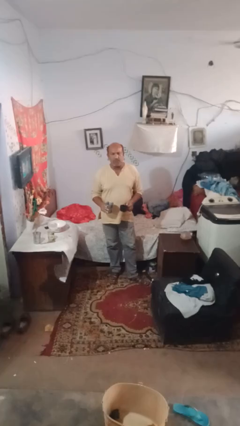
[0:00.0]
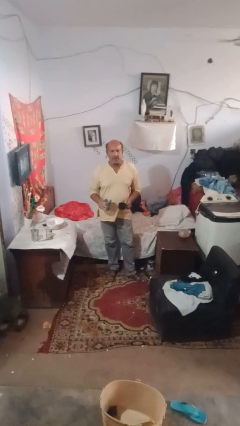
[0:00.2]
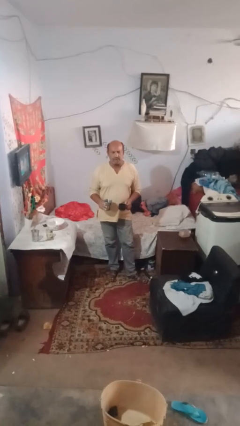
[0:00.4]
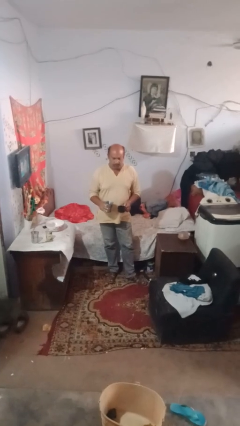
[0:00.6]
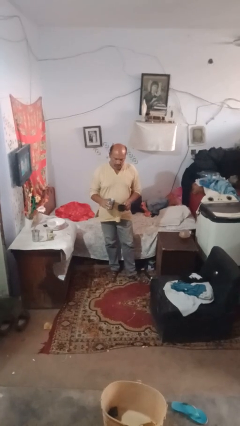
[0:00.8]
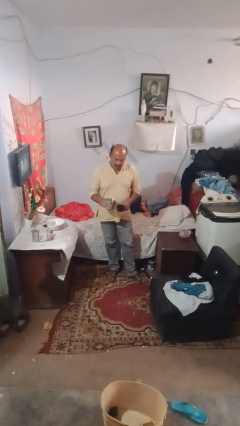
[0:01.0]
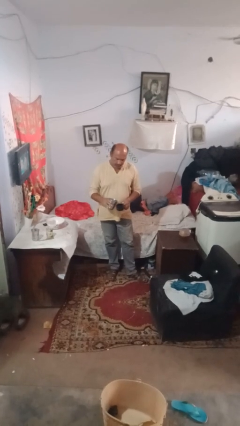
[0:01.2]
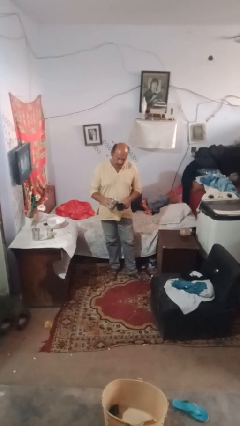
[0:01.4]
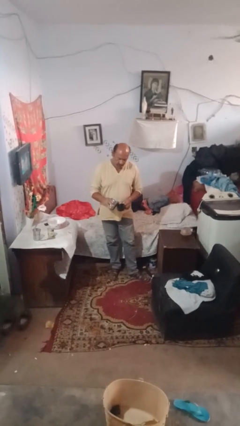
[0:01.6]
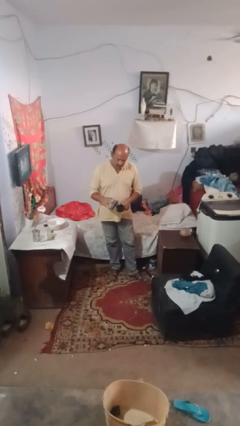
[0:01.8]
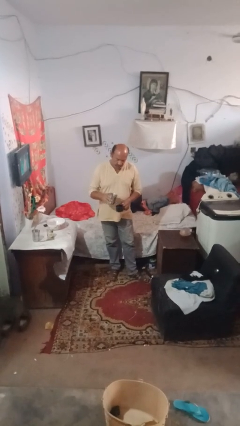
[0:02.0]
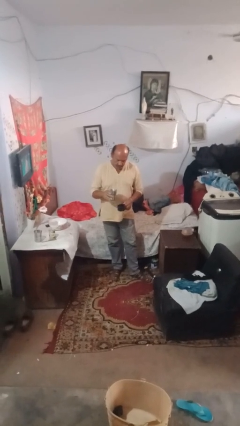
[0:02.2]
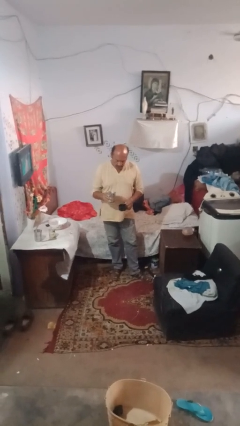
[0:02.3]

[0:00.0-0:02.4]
person pours liquid into cup

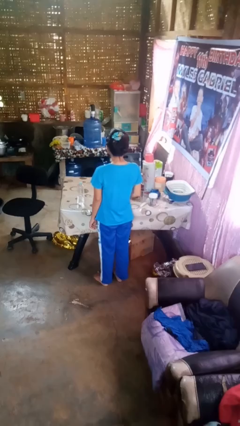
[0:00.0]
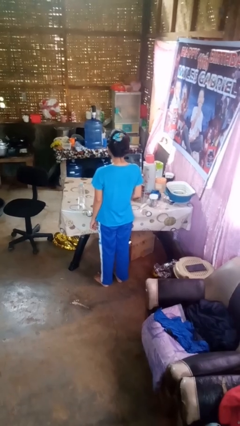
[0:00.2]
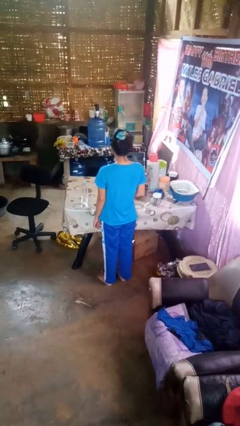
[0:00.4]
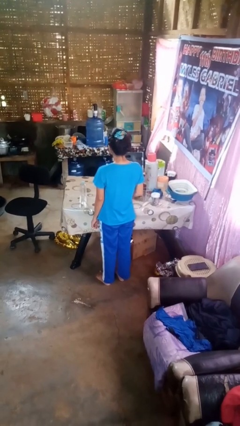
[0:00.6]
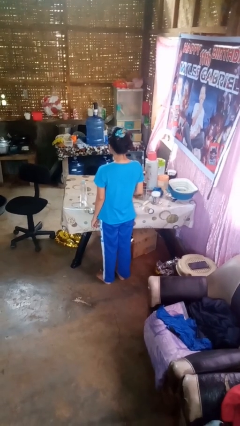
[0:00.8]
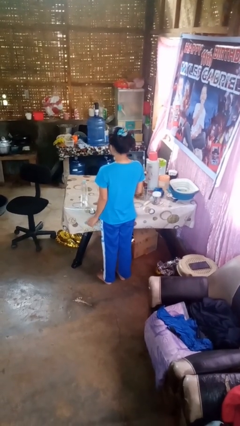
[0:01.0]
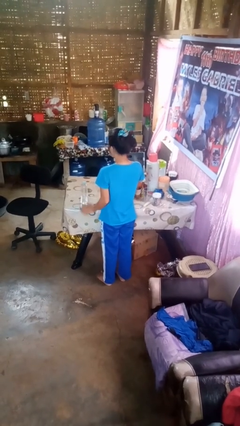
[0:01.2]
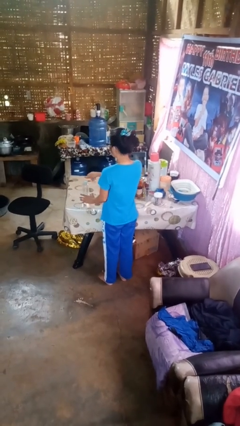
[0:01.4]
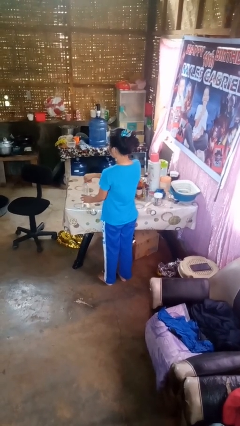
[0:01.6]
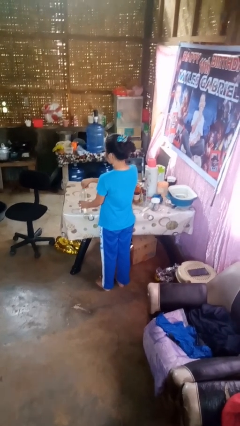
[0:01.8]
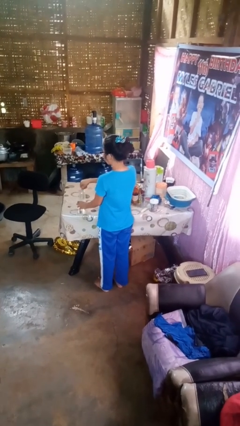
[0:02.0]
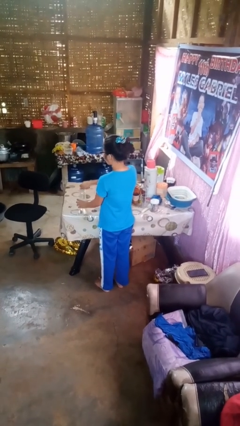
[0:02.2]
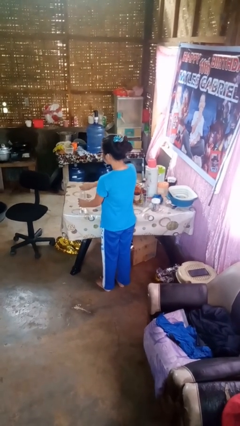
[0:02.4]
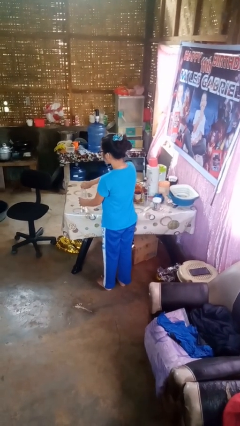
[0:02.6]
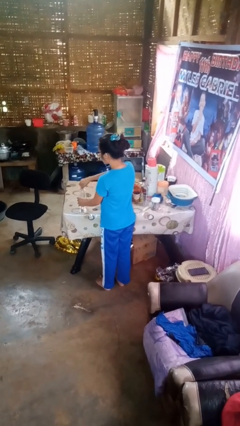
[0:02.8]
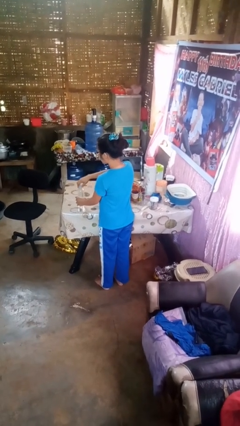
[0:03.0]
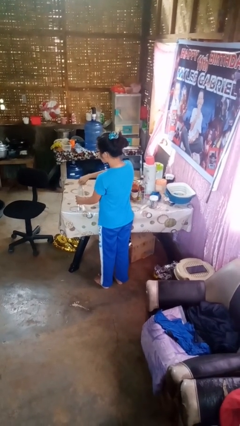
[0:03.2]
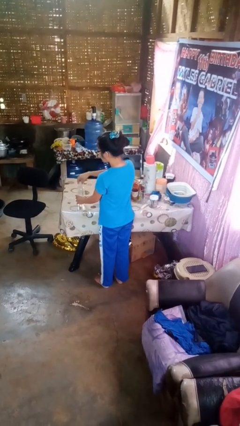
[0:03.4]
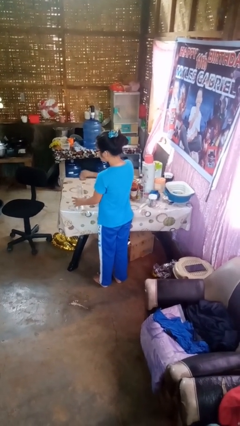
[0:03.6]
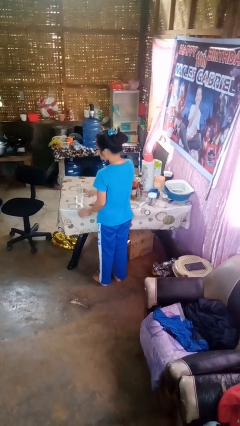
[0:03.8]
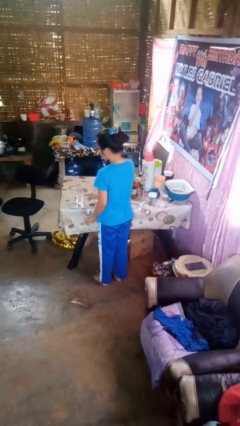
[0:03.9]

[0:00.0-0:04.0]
person unscrews lid from bottle

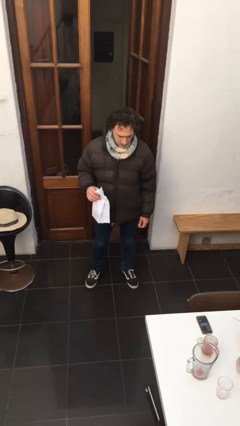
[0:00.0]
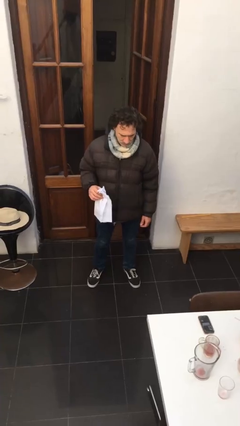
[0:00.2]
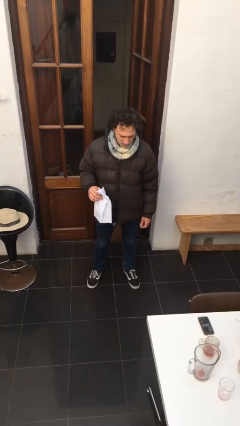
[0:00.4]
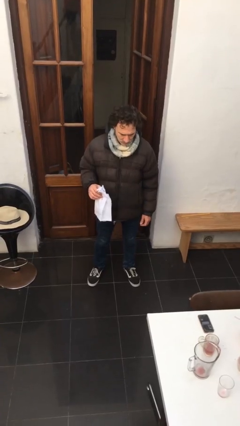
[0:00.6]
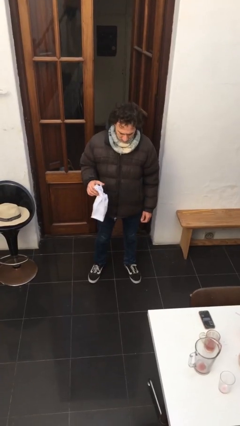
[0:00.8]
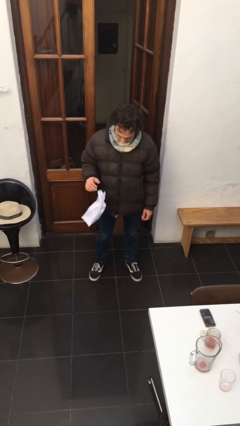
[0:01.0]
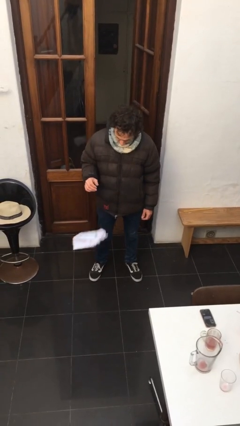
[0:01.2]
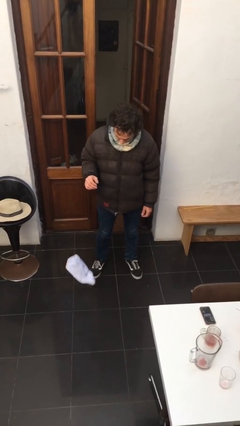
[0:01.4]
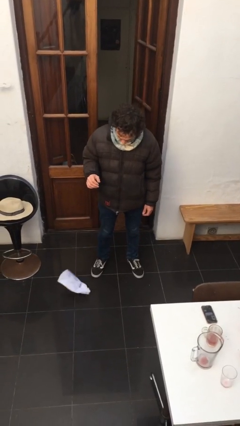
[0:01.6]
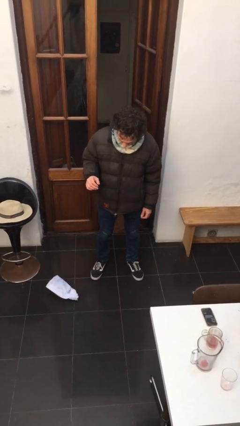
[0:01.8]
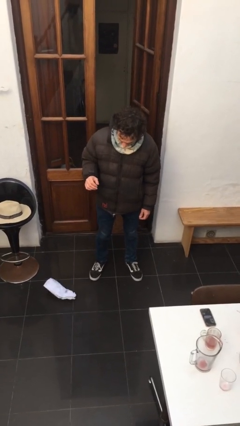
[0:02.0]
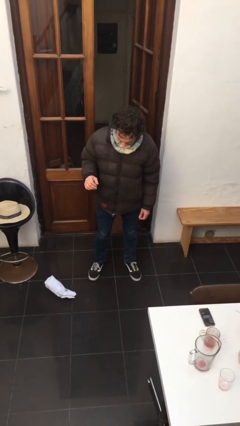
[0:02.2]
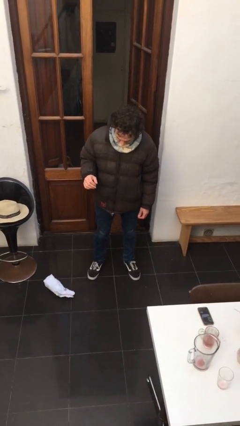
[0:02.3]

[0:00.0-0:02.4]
person drops object

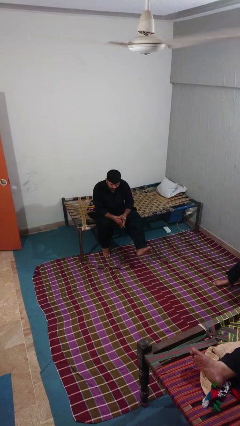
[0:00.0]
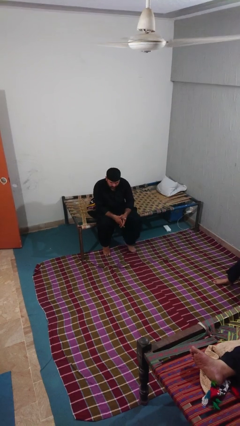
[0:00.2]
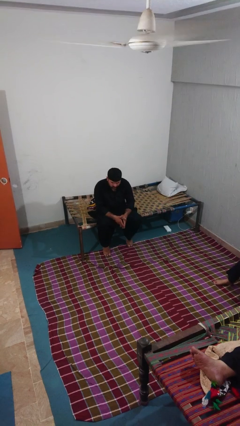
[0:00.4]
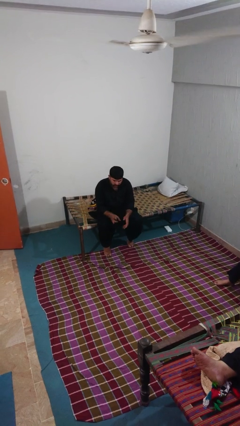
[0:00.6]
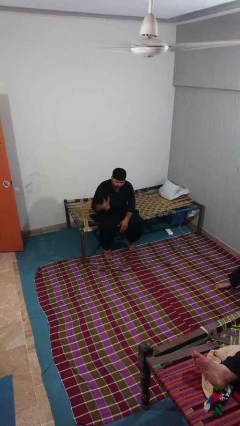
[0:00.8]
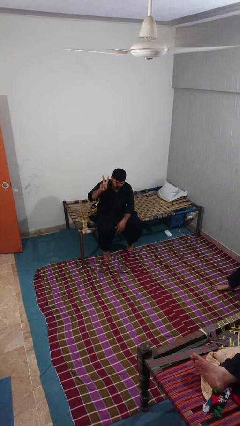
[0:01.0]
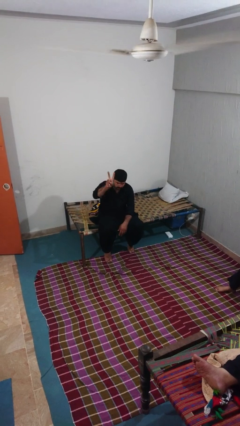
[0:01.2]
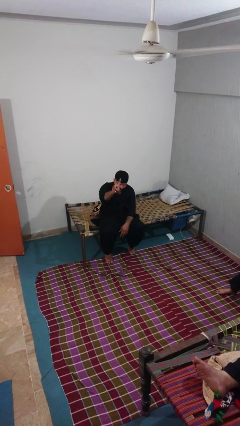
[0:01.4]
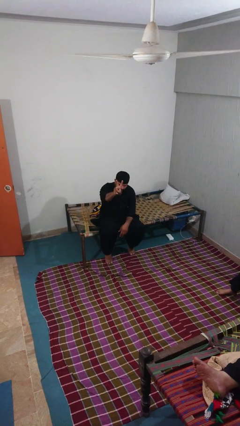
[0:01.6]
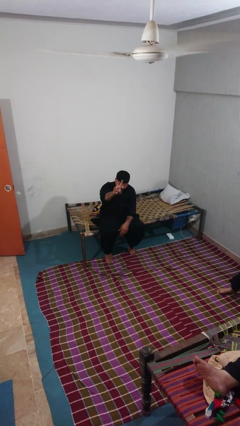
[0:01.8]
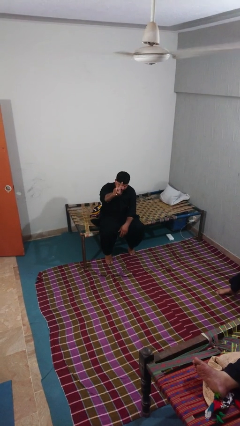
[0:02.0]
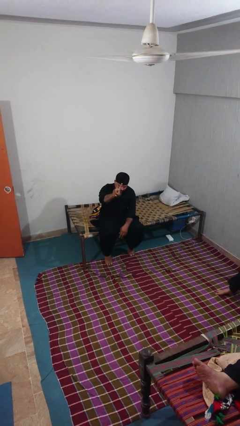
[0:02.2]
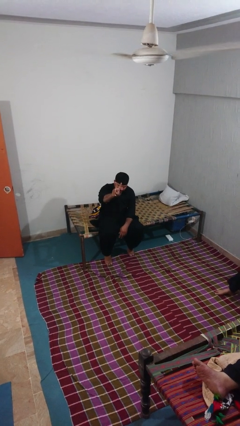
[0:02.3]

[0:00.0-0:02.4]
person gestures peace

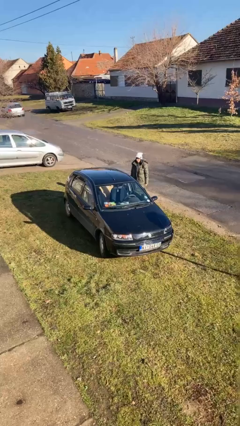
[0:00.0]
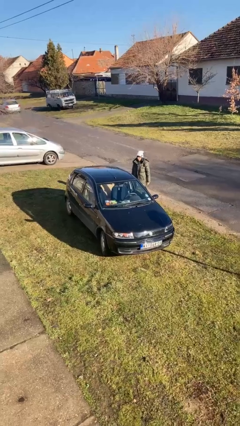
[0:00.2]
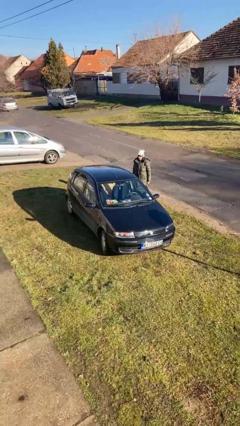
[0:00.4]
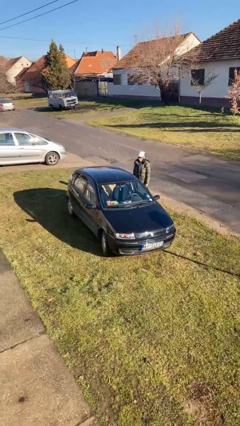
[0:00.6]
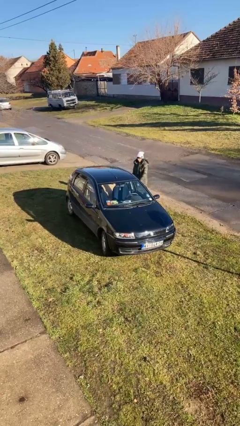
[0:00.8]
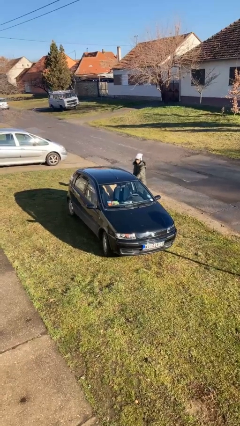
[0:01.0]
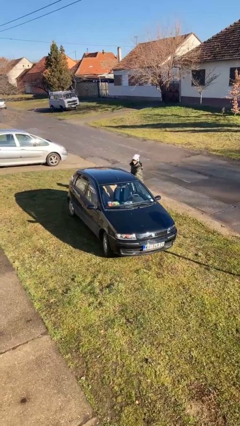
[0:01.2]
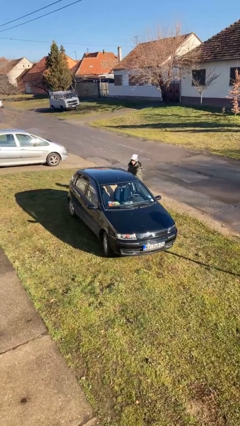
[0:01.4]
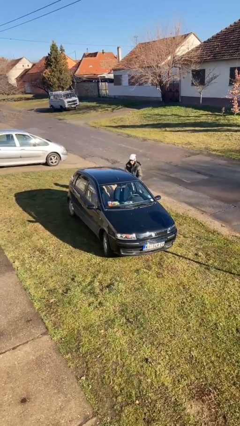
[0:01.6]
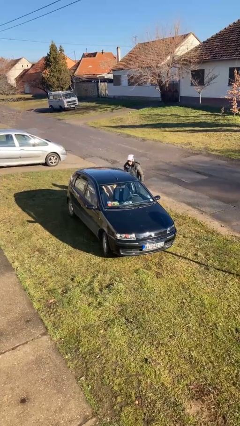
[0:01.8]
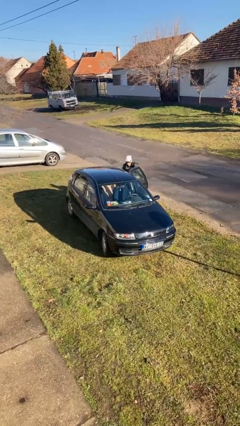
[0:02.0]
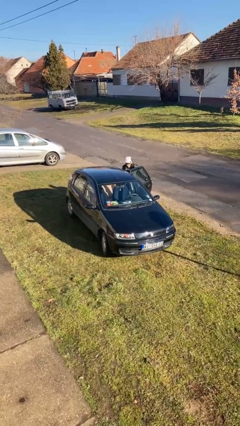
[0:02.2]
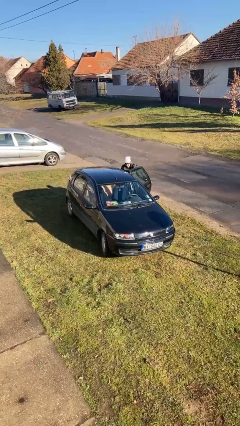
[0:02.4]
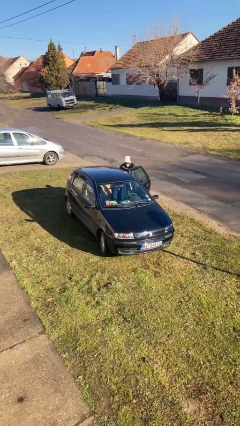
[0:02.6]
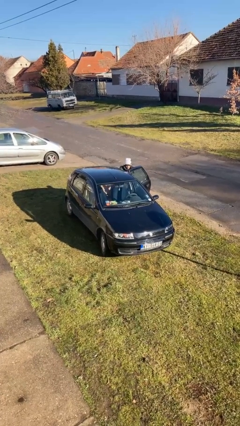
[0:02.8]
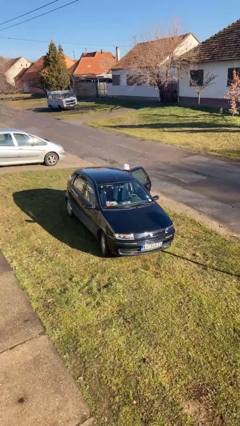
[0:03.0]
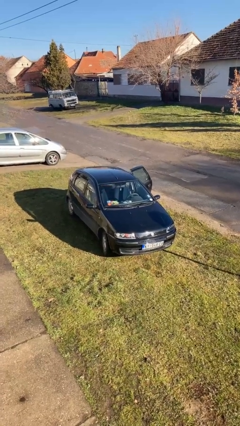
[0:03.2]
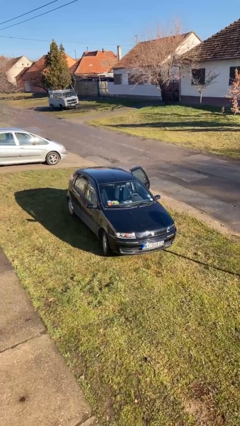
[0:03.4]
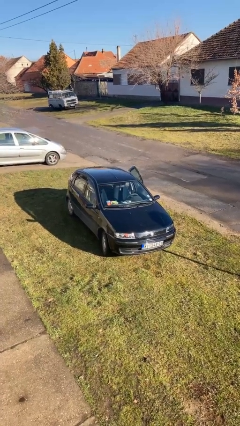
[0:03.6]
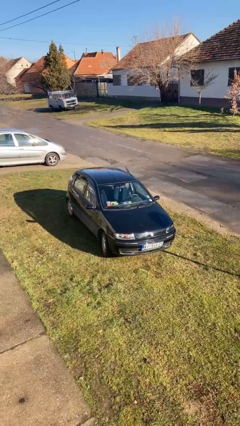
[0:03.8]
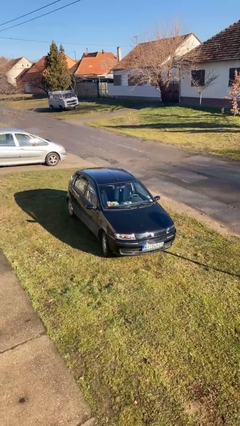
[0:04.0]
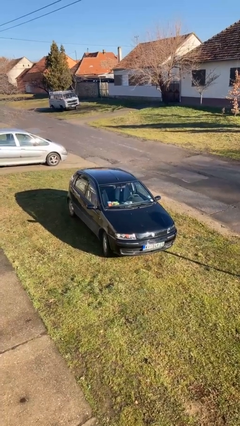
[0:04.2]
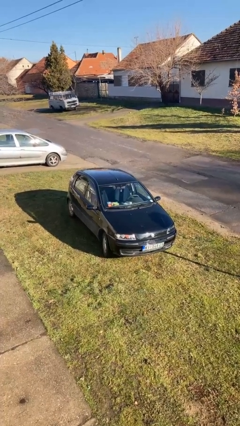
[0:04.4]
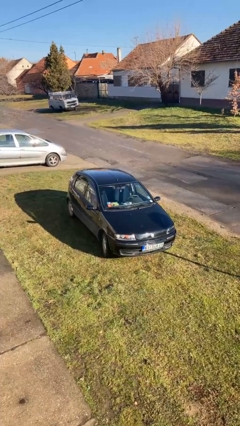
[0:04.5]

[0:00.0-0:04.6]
car picks up person

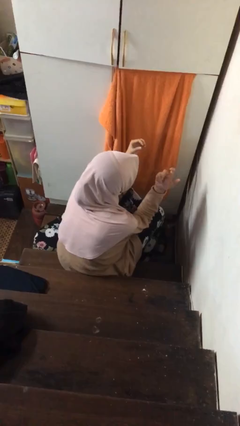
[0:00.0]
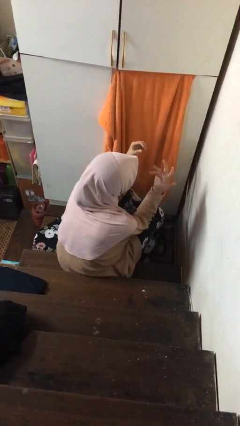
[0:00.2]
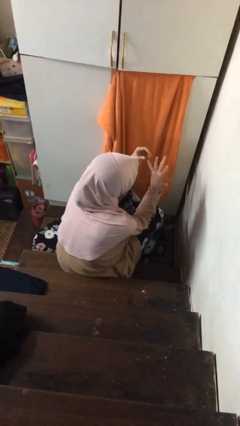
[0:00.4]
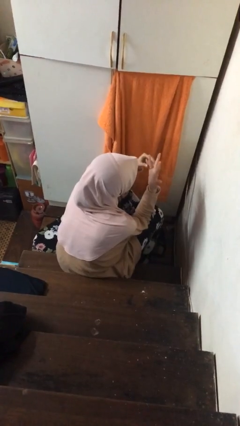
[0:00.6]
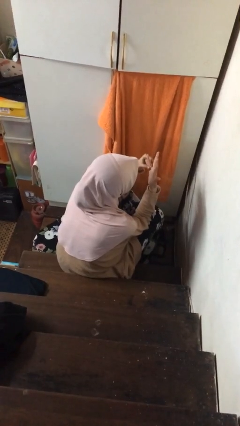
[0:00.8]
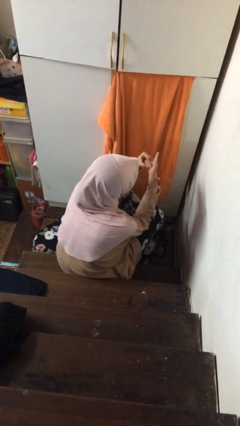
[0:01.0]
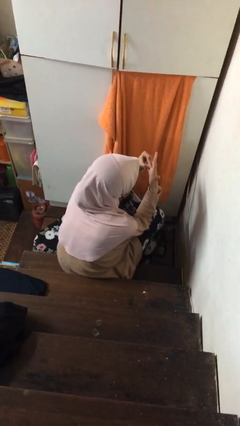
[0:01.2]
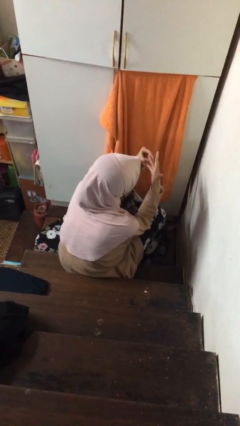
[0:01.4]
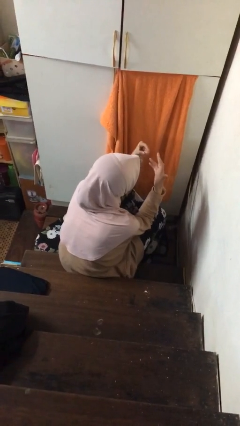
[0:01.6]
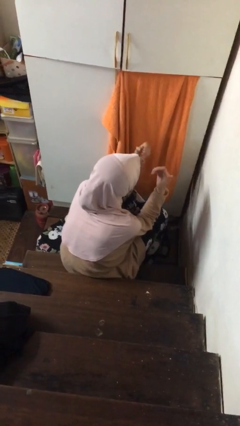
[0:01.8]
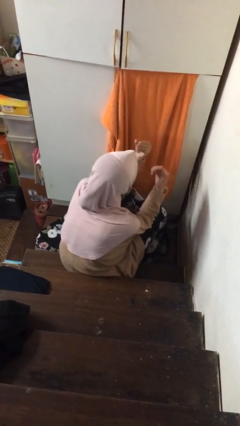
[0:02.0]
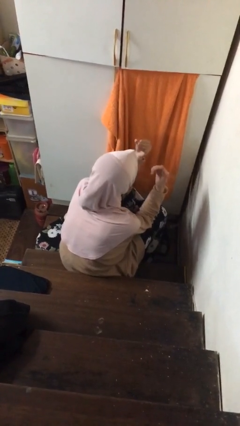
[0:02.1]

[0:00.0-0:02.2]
person takes off ring
